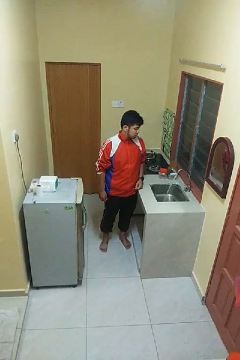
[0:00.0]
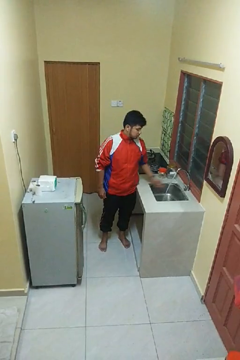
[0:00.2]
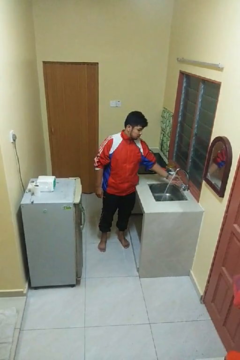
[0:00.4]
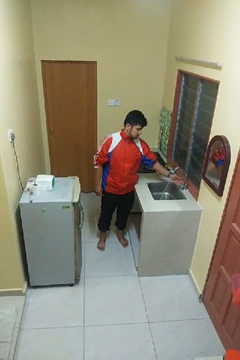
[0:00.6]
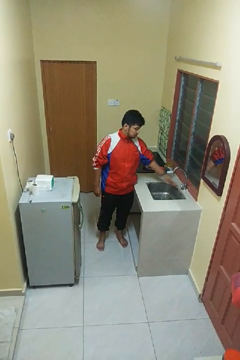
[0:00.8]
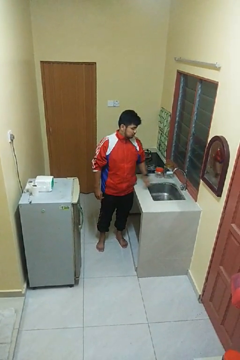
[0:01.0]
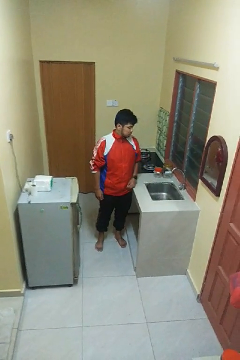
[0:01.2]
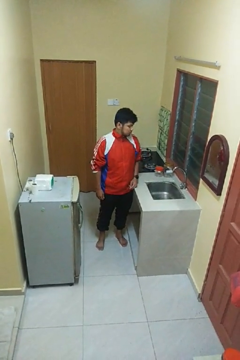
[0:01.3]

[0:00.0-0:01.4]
person turns off faucet

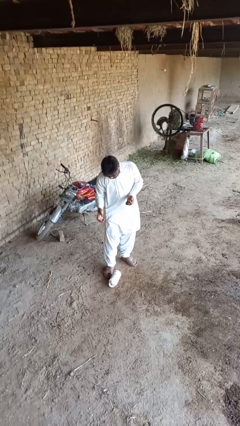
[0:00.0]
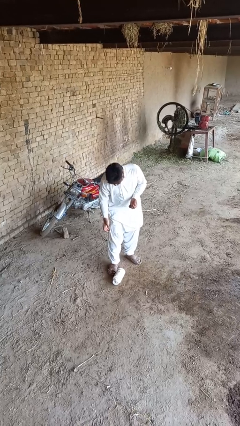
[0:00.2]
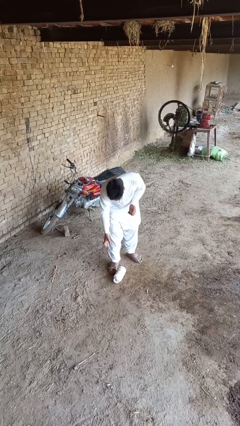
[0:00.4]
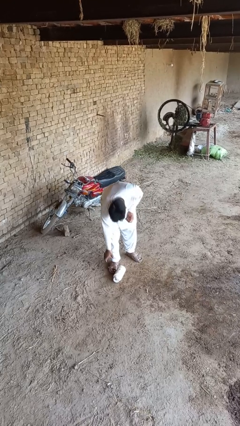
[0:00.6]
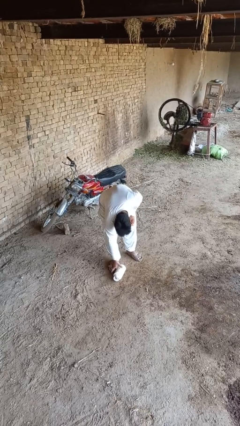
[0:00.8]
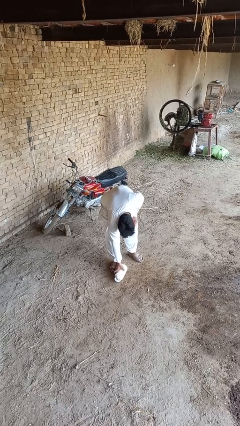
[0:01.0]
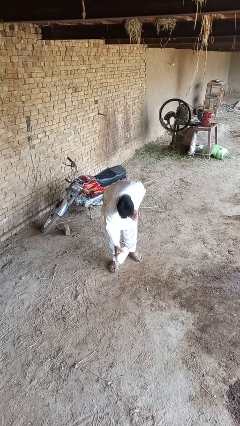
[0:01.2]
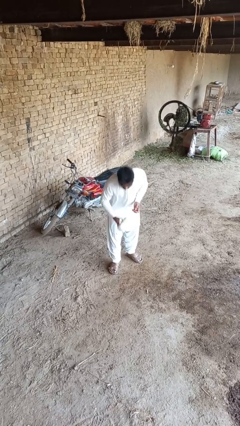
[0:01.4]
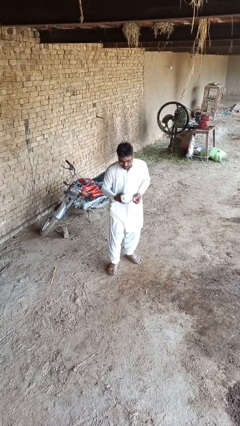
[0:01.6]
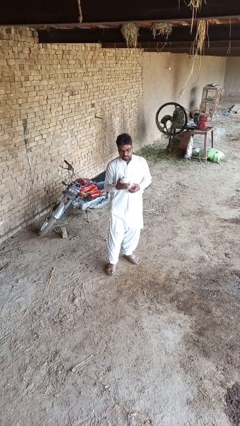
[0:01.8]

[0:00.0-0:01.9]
person picks up object from floor

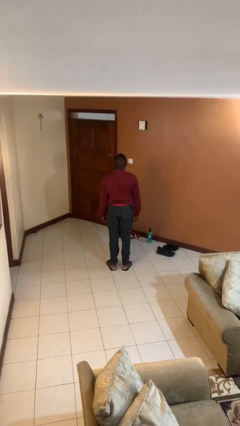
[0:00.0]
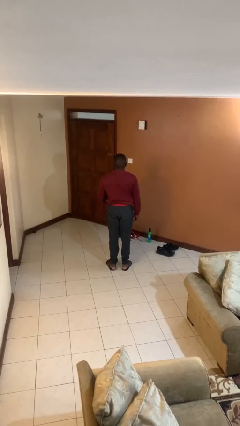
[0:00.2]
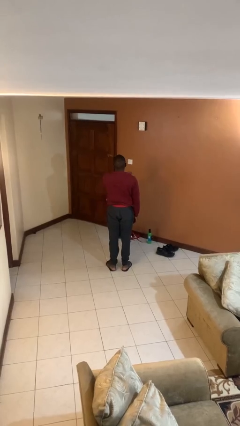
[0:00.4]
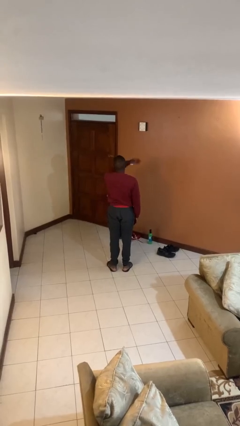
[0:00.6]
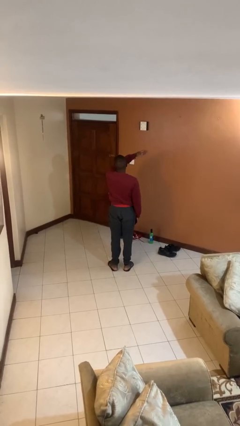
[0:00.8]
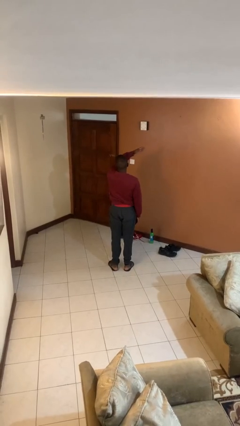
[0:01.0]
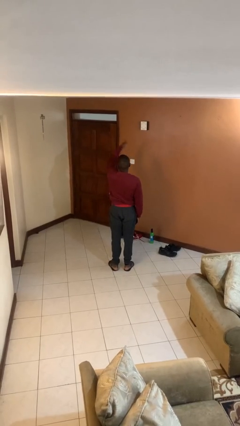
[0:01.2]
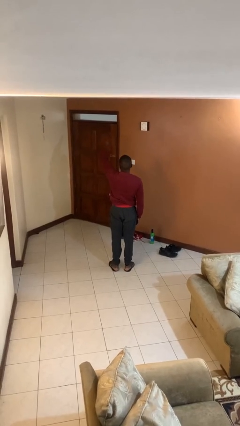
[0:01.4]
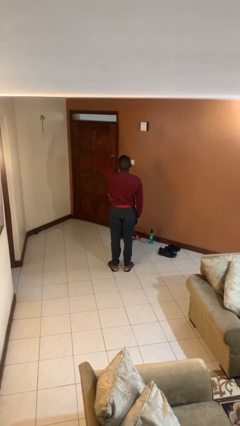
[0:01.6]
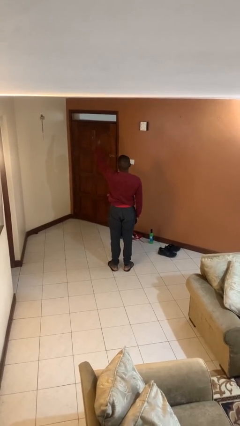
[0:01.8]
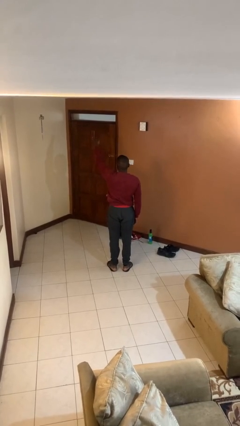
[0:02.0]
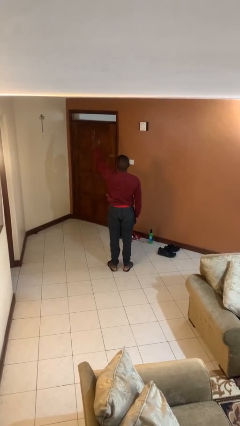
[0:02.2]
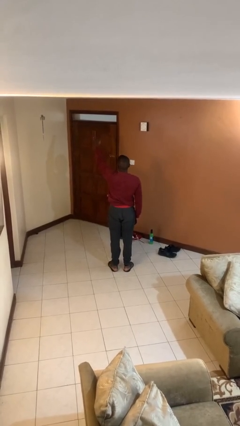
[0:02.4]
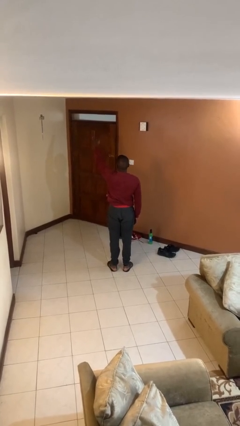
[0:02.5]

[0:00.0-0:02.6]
person gestures swipe left

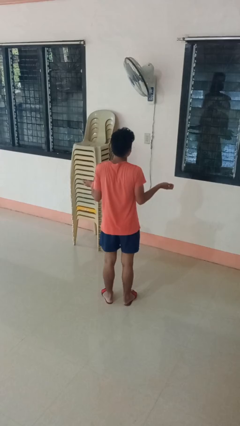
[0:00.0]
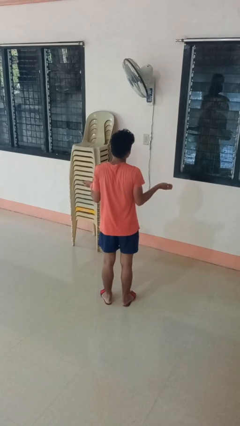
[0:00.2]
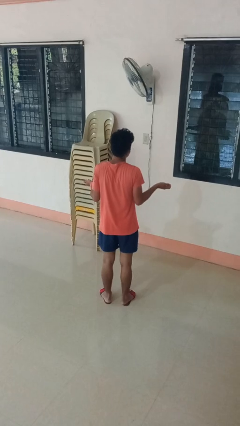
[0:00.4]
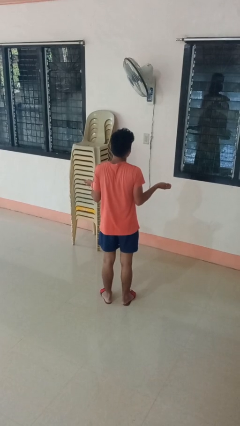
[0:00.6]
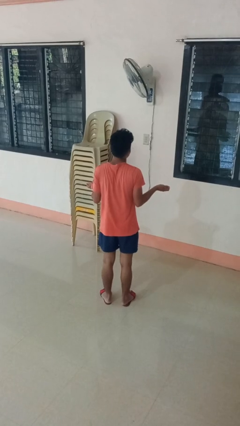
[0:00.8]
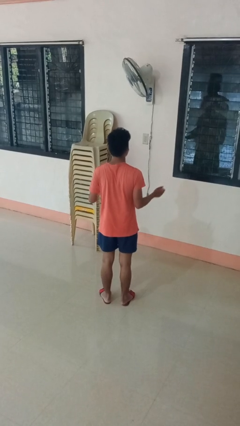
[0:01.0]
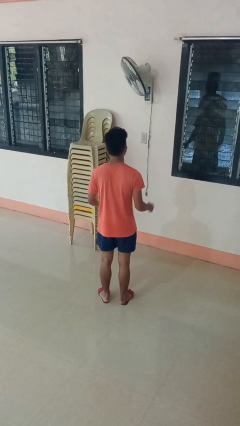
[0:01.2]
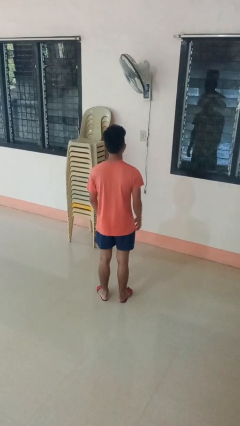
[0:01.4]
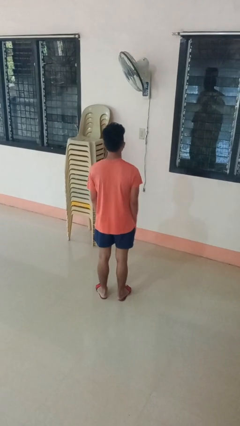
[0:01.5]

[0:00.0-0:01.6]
person shrugs

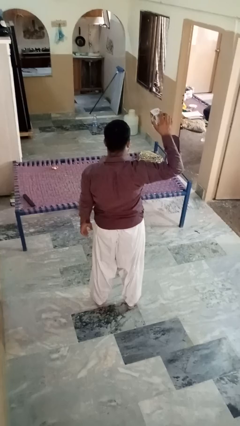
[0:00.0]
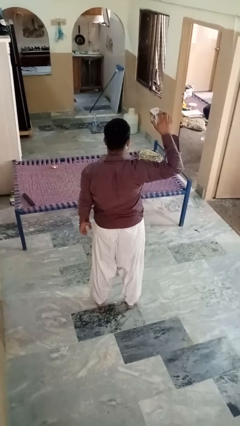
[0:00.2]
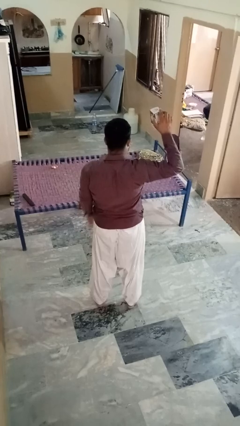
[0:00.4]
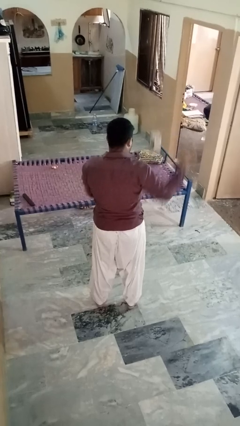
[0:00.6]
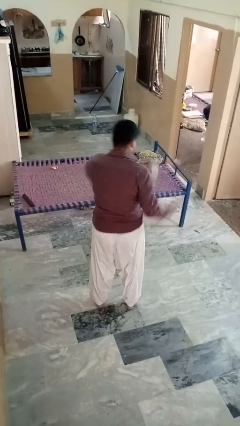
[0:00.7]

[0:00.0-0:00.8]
person drops object

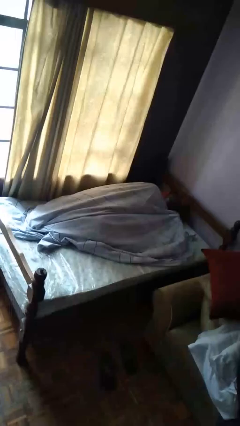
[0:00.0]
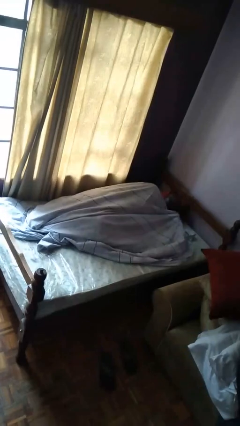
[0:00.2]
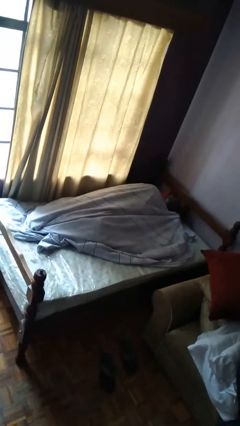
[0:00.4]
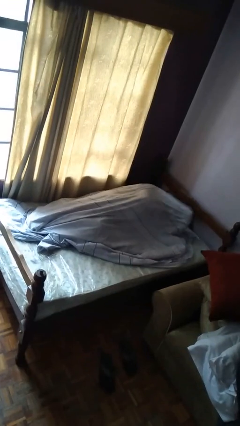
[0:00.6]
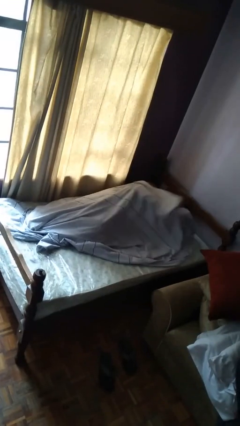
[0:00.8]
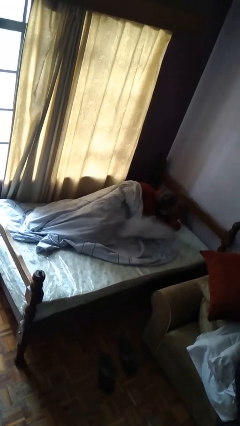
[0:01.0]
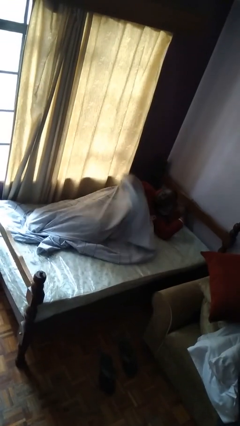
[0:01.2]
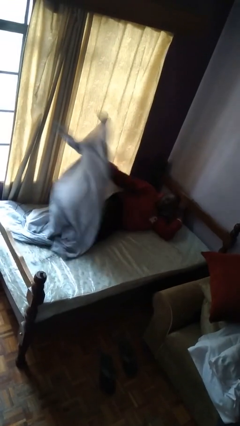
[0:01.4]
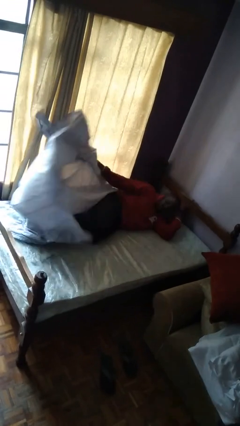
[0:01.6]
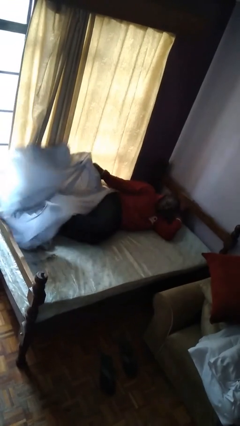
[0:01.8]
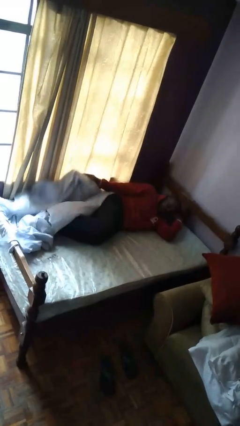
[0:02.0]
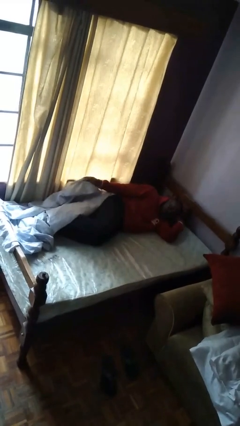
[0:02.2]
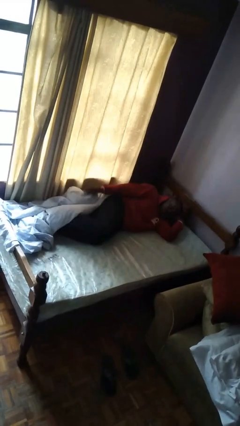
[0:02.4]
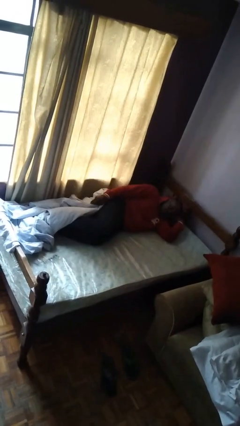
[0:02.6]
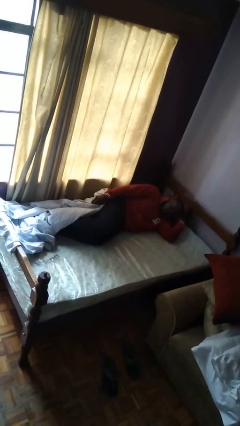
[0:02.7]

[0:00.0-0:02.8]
person uncovers with bedsheets

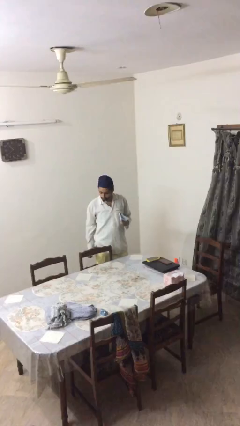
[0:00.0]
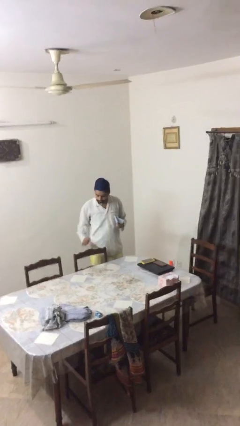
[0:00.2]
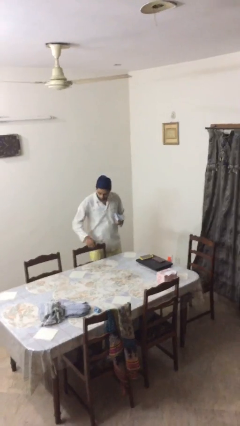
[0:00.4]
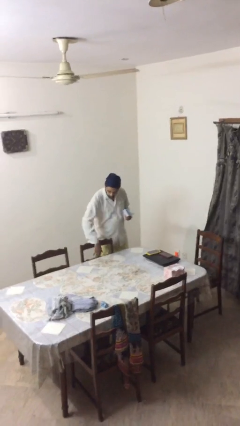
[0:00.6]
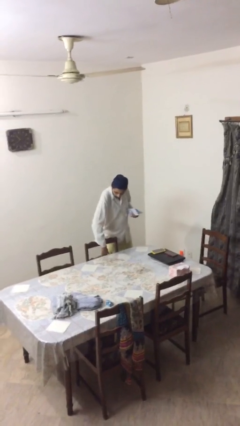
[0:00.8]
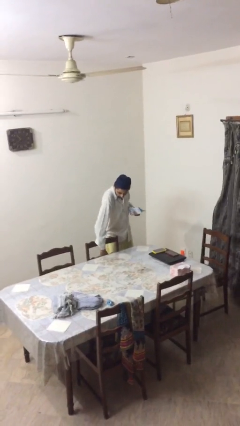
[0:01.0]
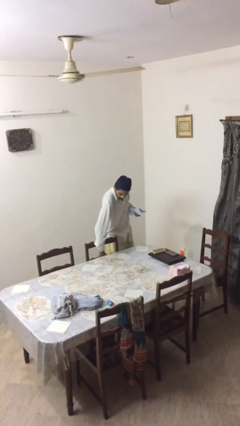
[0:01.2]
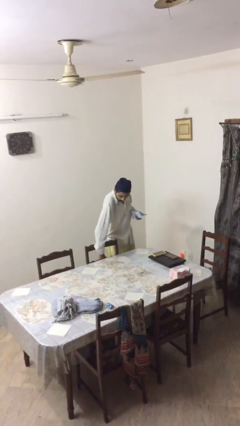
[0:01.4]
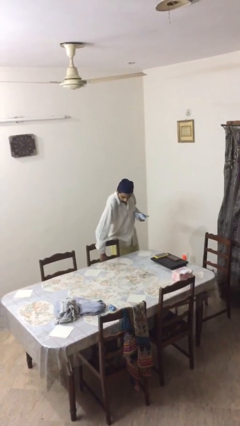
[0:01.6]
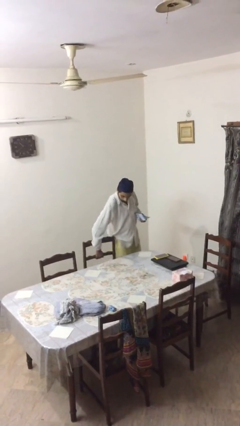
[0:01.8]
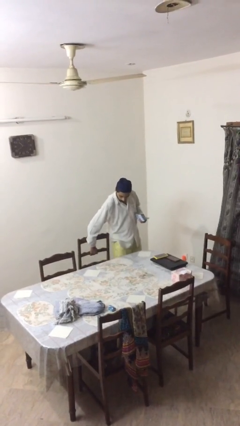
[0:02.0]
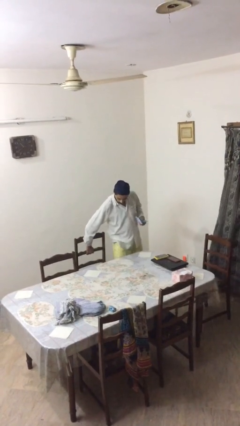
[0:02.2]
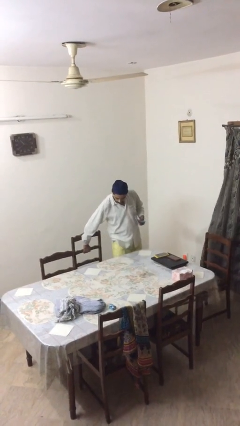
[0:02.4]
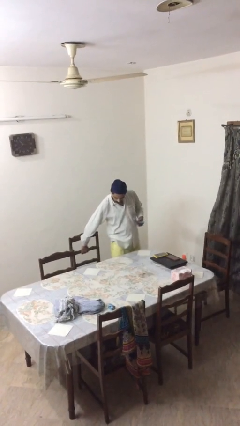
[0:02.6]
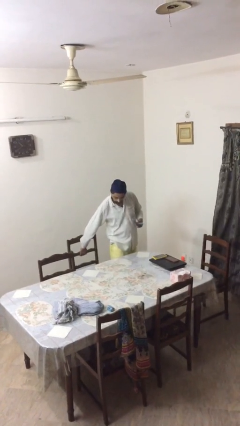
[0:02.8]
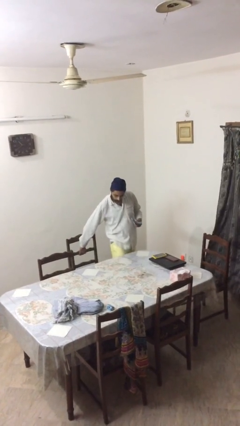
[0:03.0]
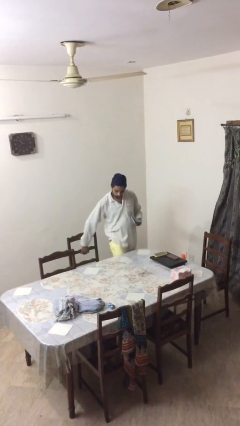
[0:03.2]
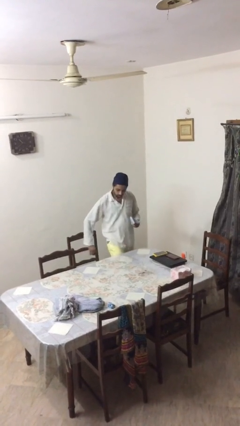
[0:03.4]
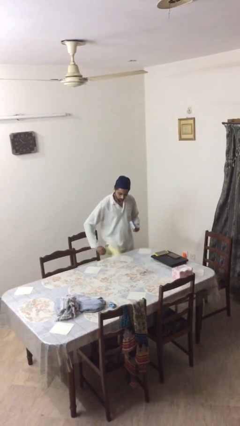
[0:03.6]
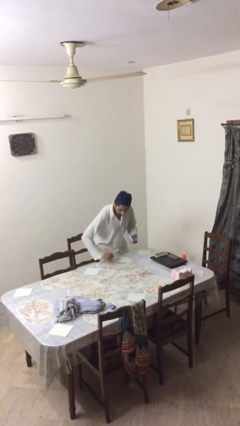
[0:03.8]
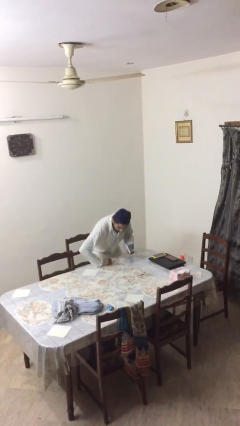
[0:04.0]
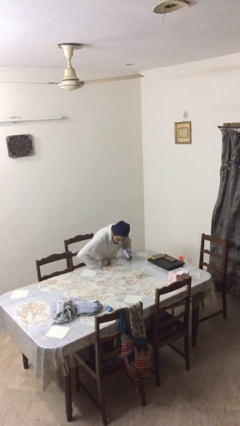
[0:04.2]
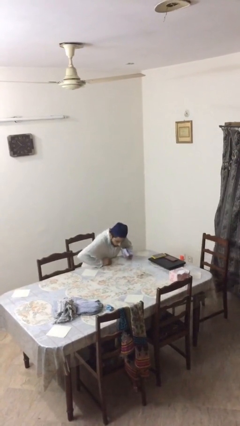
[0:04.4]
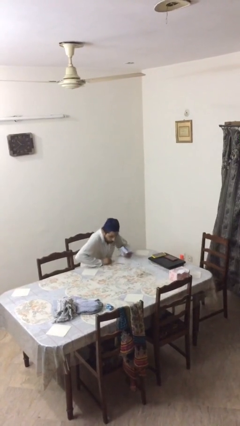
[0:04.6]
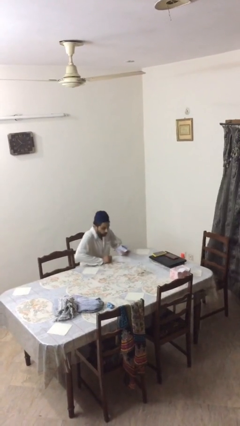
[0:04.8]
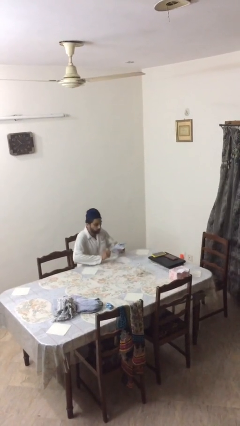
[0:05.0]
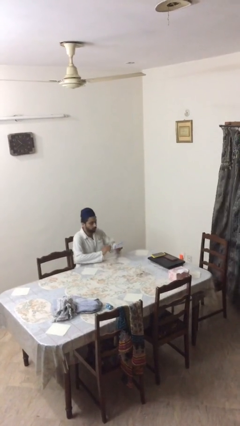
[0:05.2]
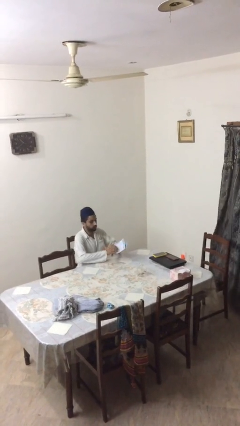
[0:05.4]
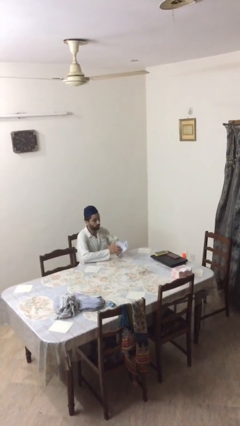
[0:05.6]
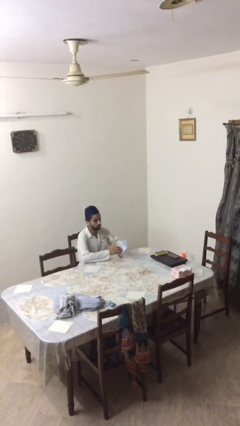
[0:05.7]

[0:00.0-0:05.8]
person sits down

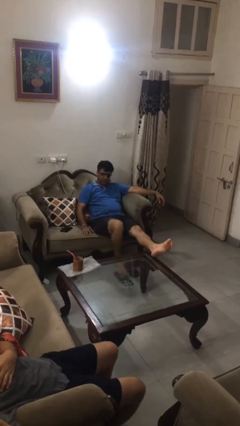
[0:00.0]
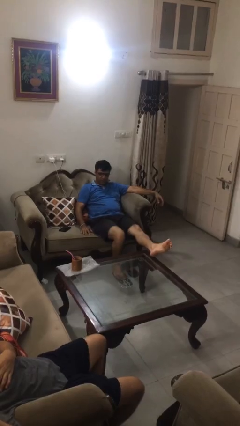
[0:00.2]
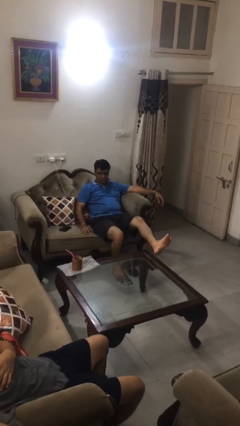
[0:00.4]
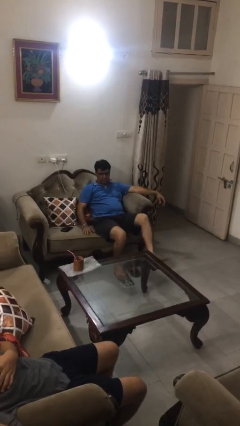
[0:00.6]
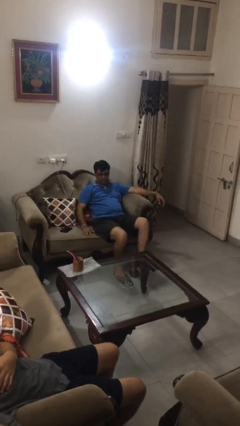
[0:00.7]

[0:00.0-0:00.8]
person puts feet up
